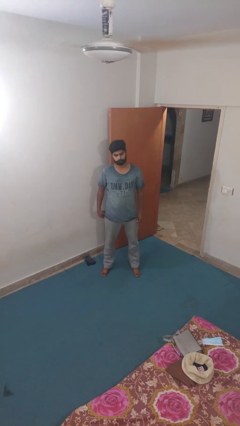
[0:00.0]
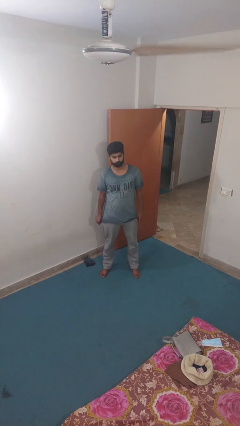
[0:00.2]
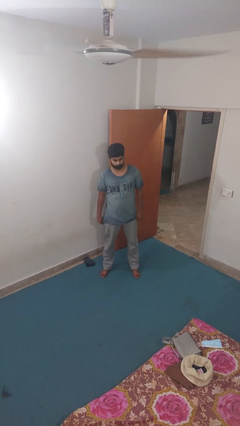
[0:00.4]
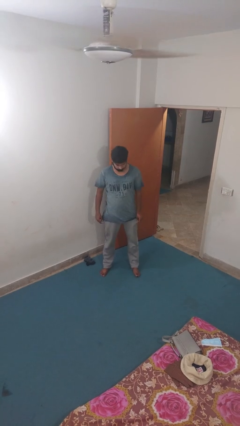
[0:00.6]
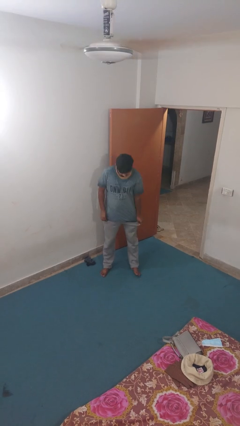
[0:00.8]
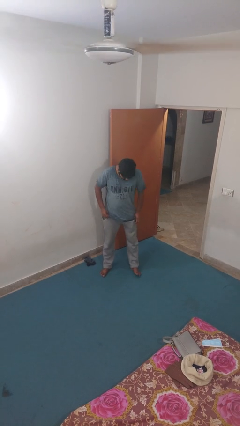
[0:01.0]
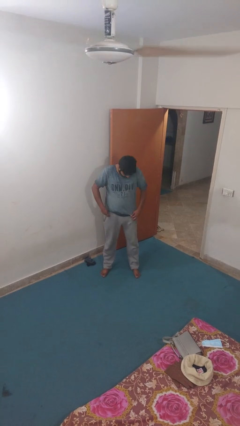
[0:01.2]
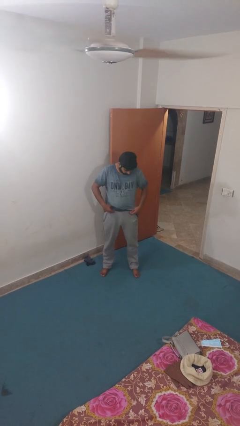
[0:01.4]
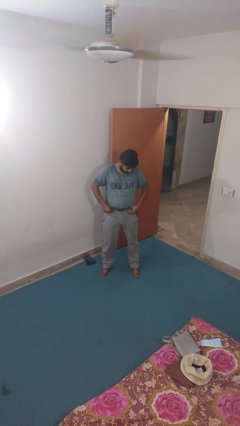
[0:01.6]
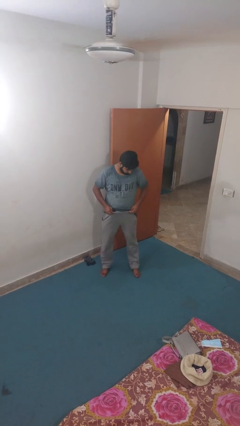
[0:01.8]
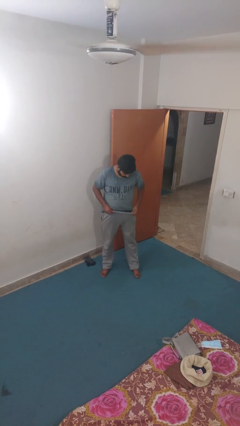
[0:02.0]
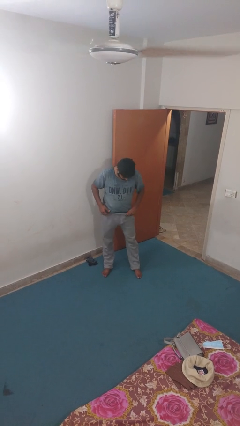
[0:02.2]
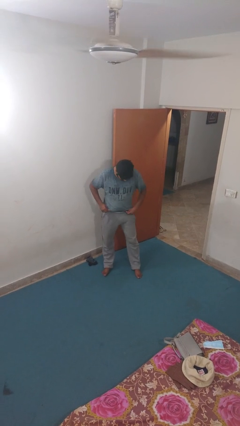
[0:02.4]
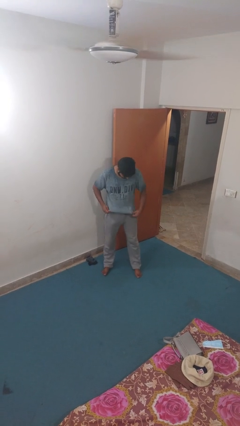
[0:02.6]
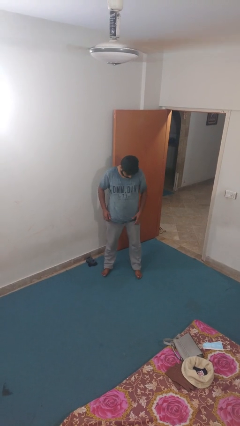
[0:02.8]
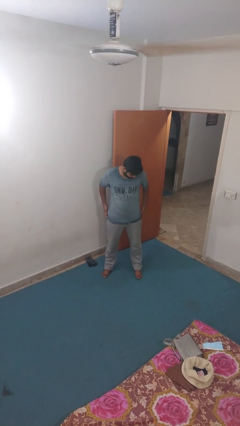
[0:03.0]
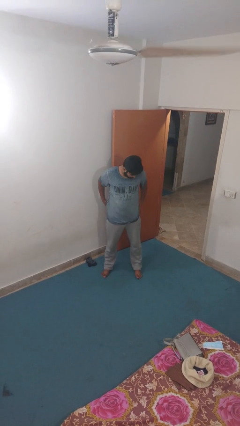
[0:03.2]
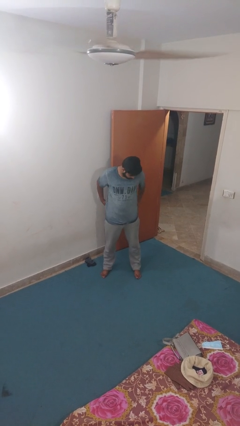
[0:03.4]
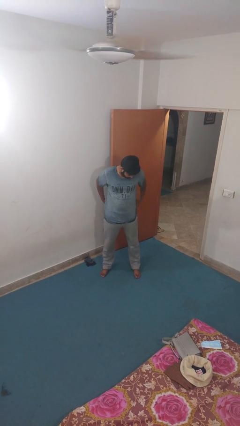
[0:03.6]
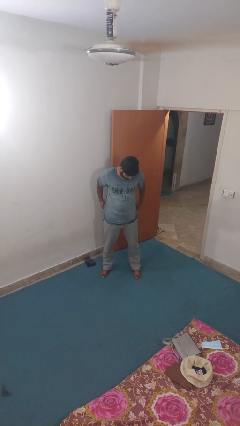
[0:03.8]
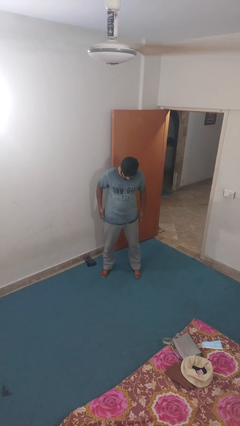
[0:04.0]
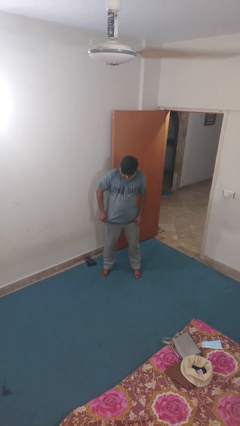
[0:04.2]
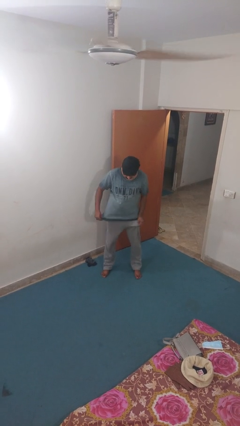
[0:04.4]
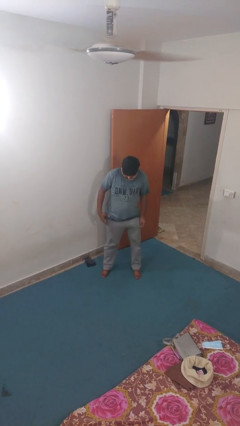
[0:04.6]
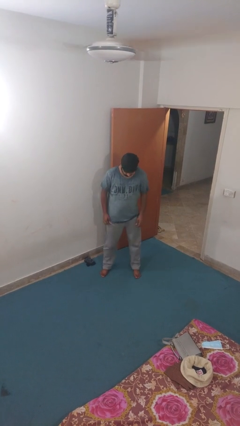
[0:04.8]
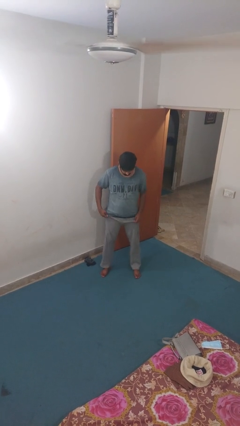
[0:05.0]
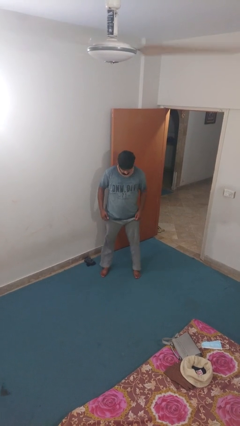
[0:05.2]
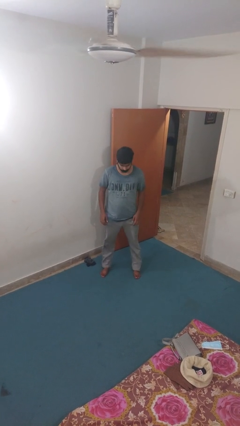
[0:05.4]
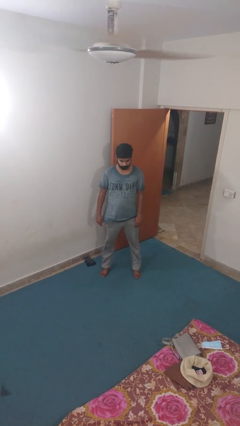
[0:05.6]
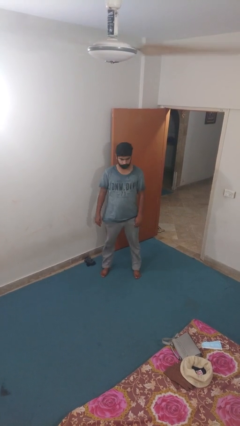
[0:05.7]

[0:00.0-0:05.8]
person hikes up pants

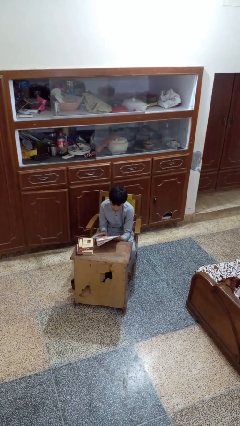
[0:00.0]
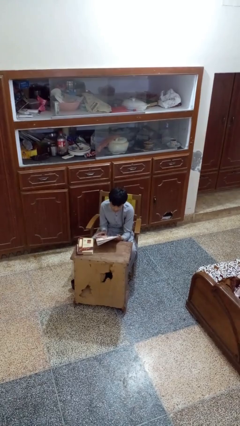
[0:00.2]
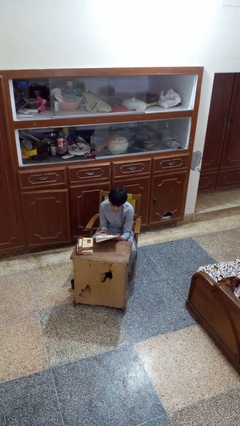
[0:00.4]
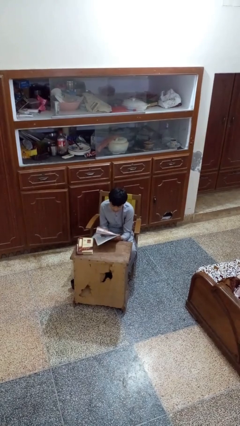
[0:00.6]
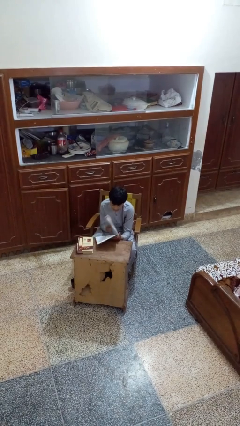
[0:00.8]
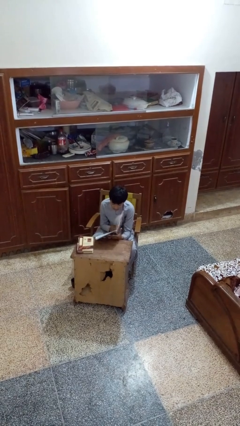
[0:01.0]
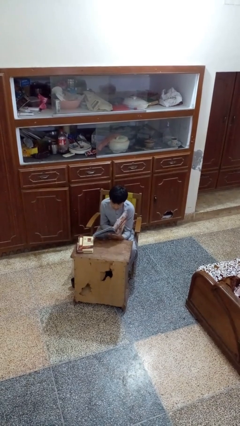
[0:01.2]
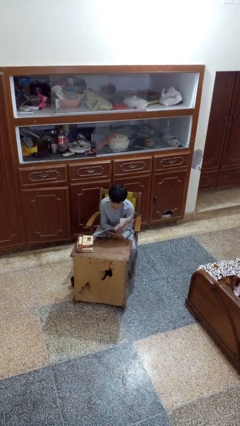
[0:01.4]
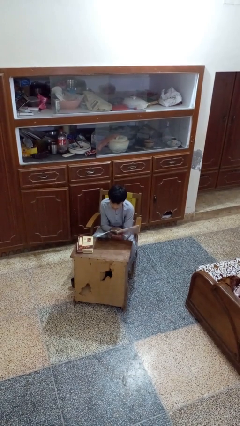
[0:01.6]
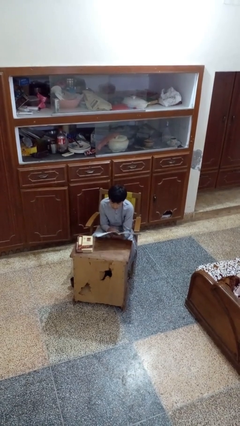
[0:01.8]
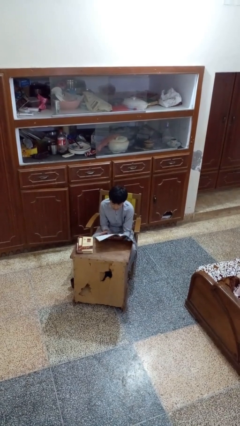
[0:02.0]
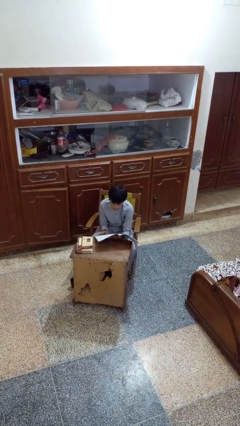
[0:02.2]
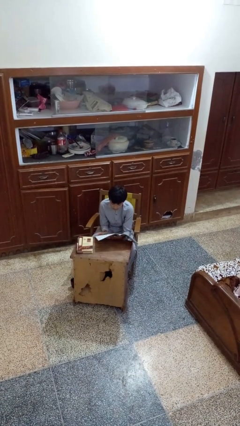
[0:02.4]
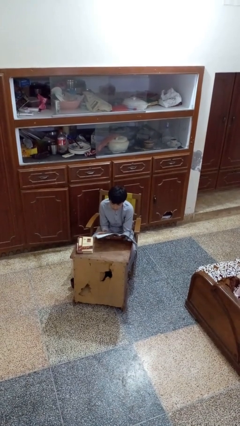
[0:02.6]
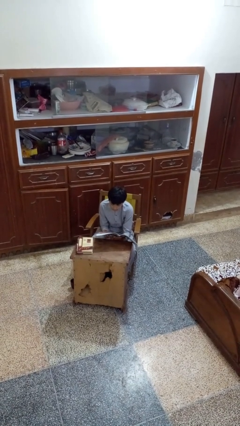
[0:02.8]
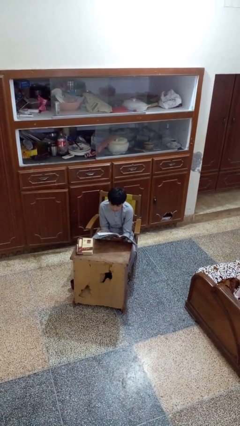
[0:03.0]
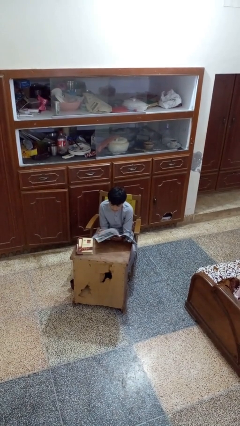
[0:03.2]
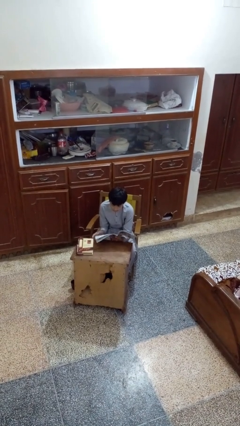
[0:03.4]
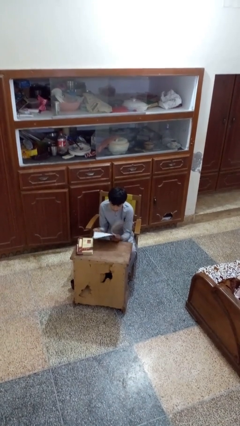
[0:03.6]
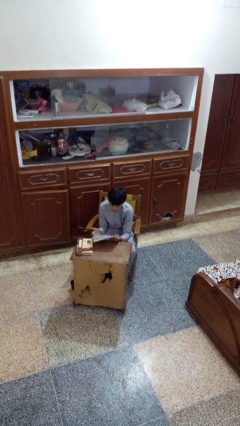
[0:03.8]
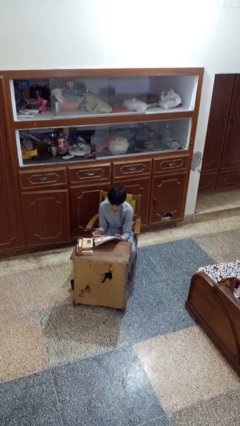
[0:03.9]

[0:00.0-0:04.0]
person reads magazine

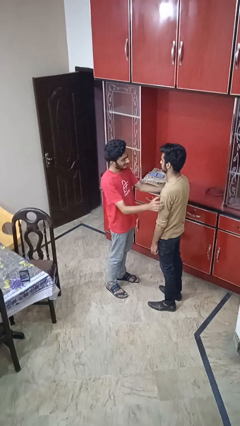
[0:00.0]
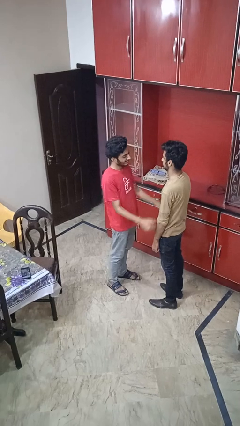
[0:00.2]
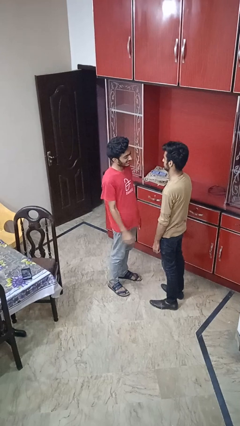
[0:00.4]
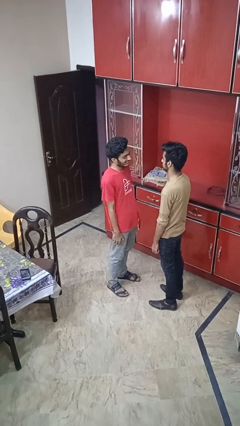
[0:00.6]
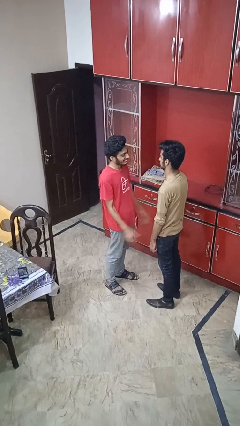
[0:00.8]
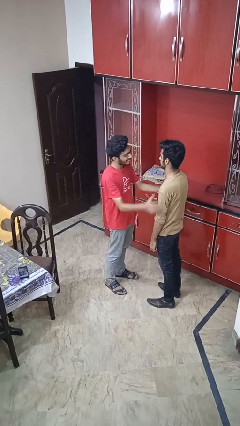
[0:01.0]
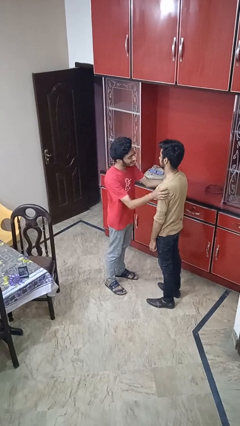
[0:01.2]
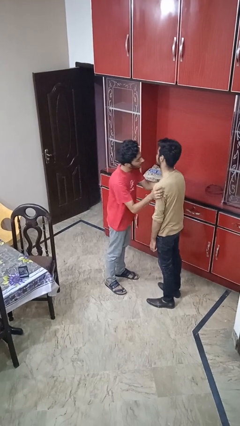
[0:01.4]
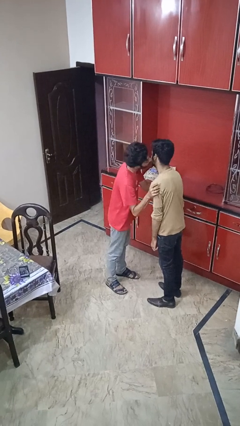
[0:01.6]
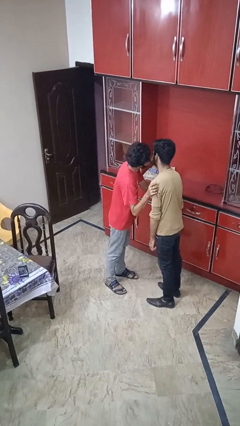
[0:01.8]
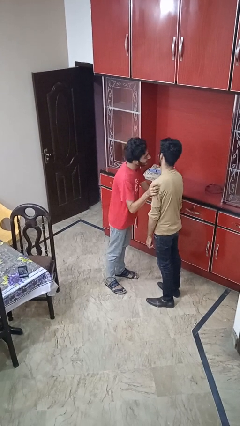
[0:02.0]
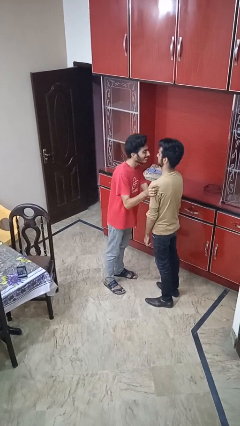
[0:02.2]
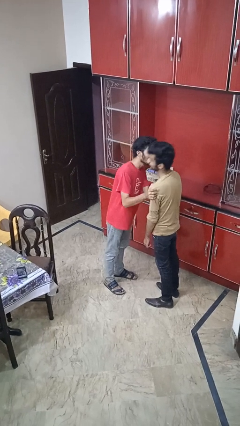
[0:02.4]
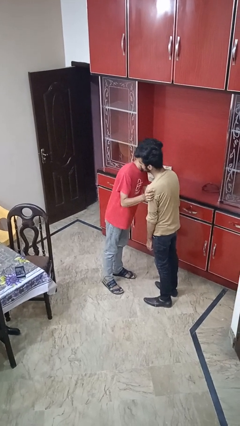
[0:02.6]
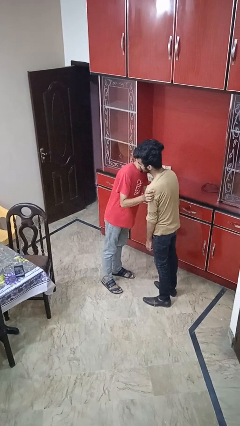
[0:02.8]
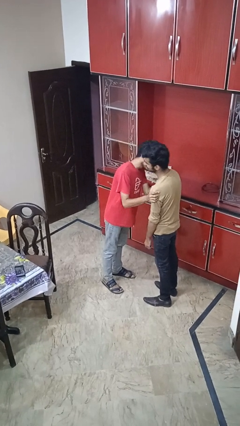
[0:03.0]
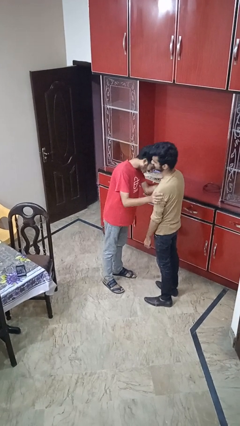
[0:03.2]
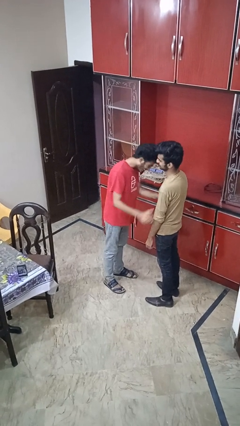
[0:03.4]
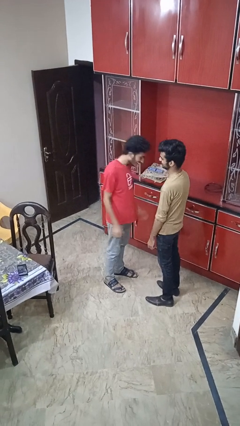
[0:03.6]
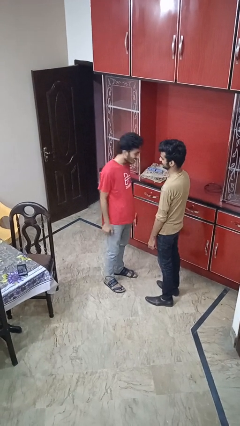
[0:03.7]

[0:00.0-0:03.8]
person kisses cheek of person

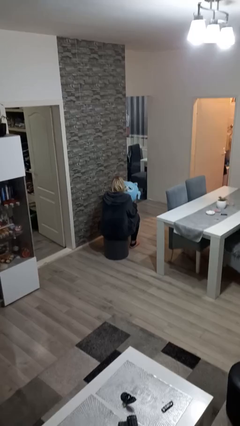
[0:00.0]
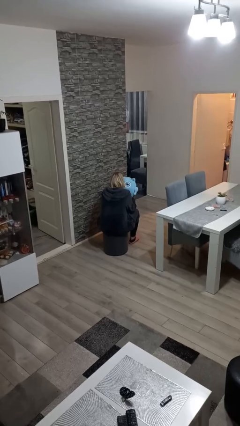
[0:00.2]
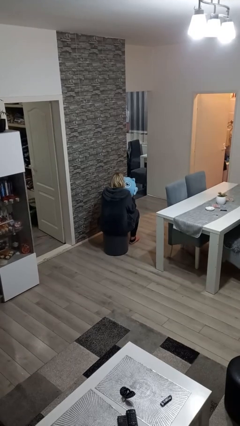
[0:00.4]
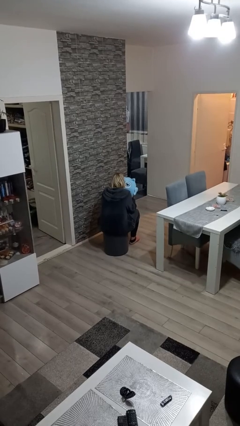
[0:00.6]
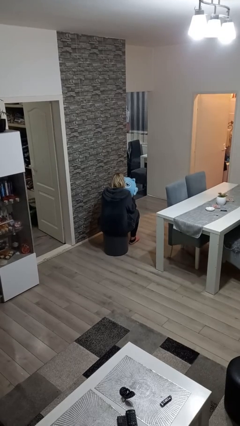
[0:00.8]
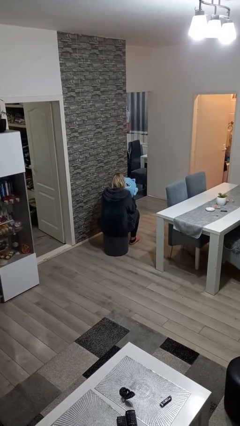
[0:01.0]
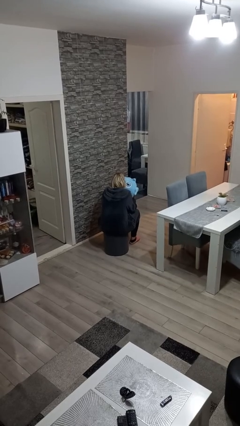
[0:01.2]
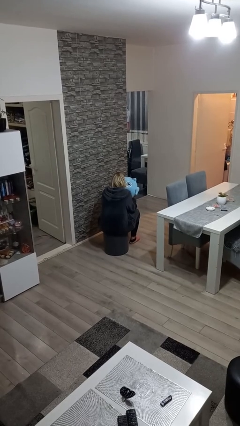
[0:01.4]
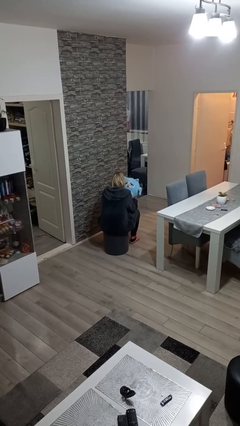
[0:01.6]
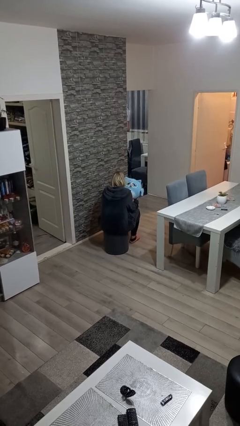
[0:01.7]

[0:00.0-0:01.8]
person hugs stuffed animal

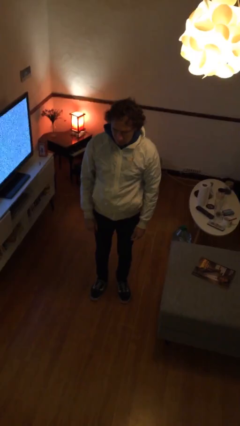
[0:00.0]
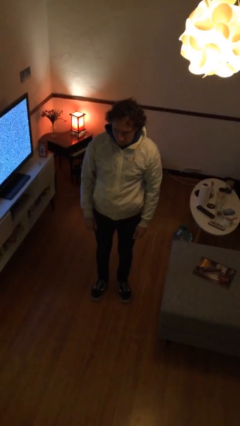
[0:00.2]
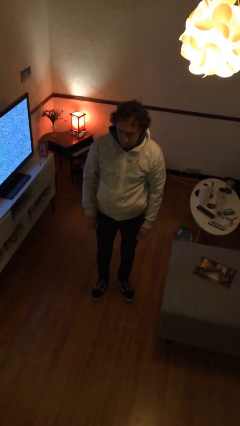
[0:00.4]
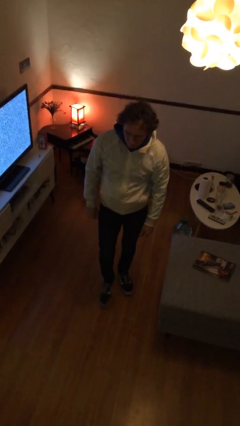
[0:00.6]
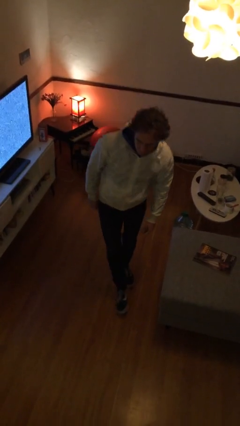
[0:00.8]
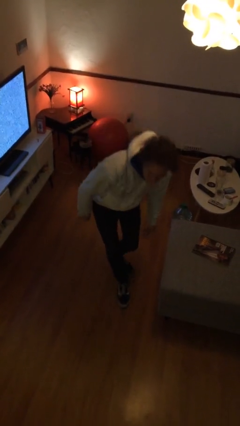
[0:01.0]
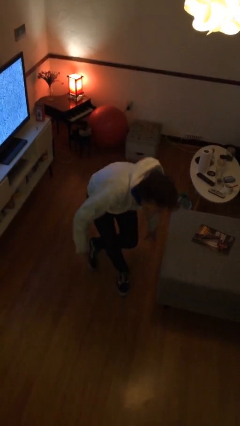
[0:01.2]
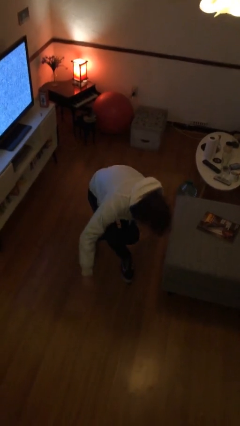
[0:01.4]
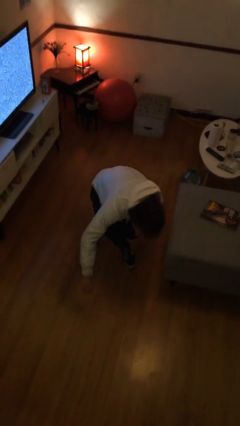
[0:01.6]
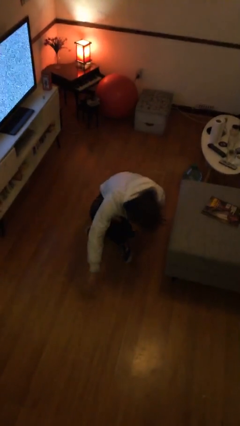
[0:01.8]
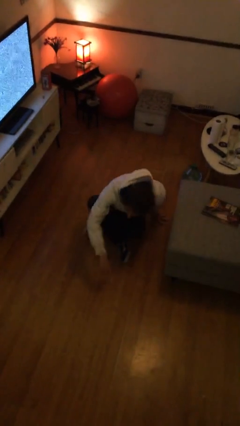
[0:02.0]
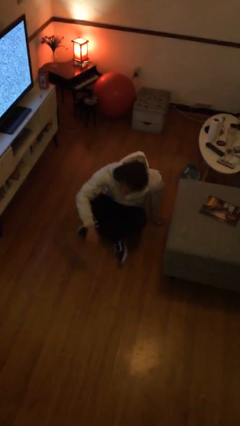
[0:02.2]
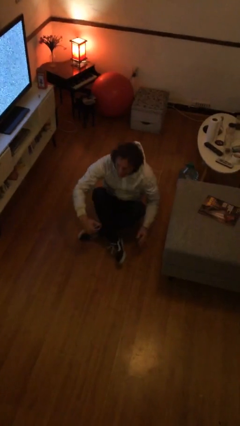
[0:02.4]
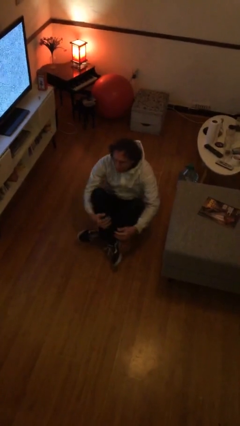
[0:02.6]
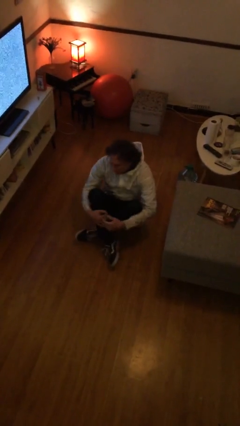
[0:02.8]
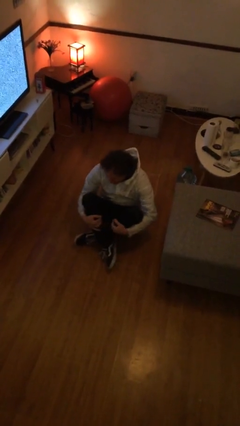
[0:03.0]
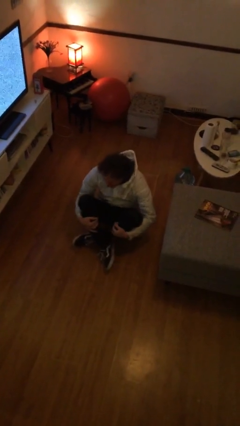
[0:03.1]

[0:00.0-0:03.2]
person sits crisscross
